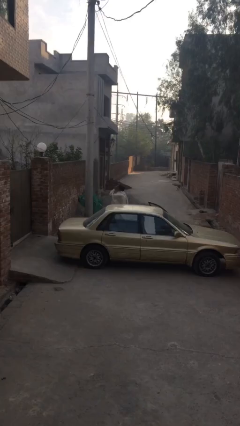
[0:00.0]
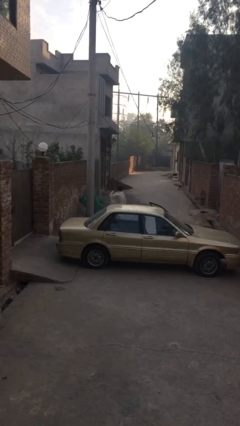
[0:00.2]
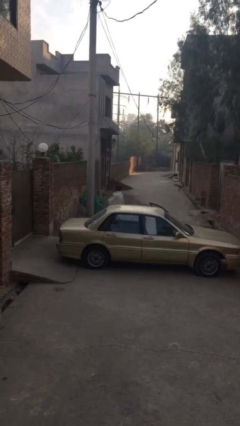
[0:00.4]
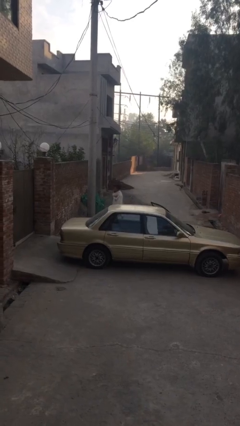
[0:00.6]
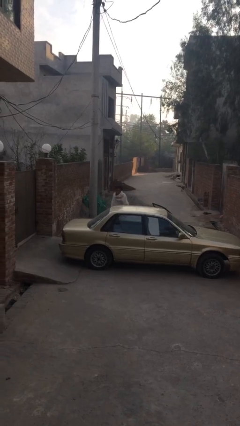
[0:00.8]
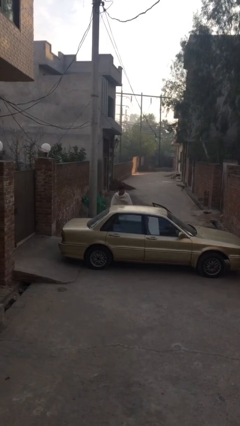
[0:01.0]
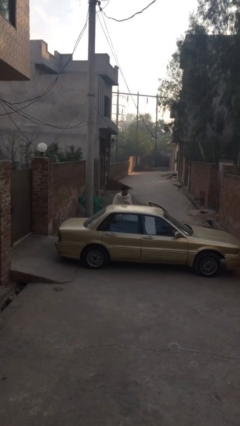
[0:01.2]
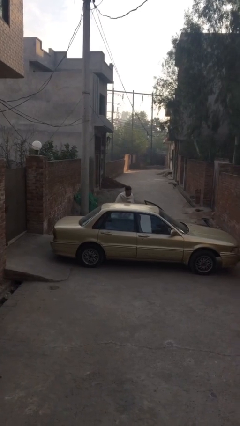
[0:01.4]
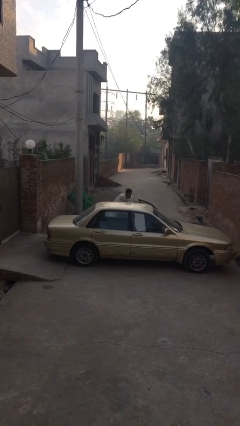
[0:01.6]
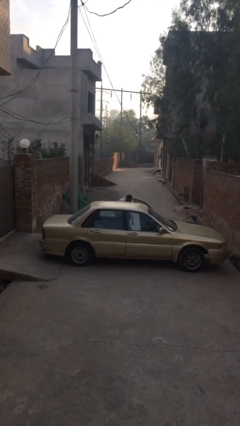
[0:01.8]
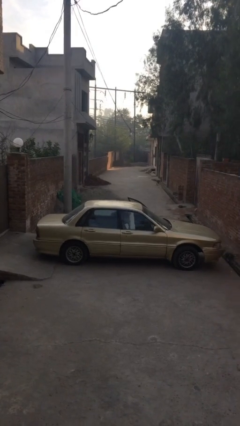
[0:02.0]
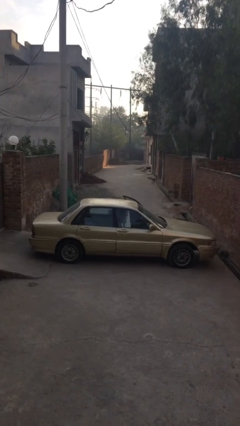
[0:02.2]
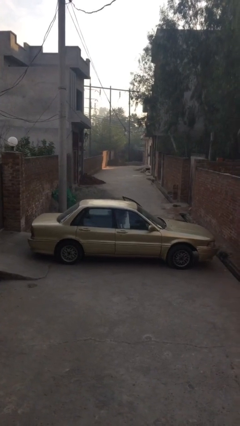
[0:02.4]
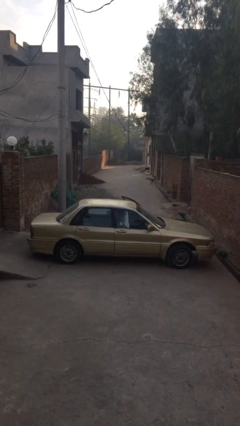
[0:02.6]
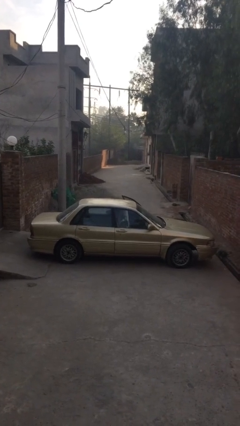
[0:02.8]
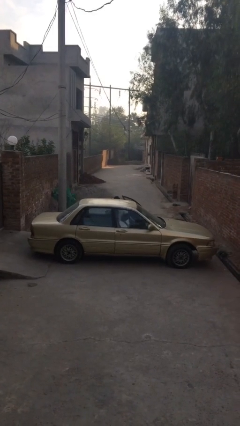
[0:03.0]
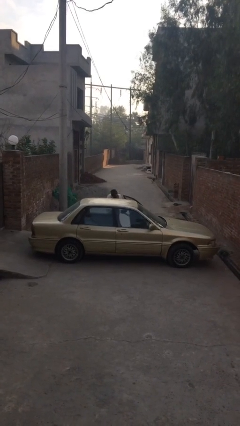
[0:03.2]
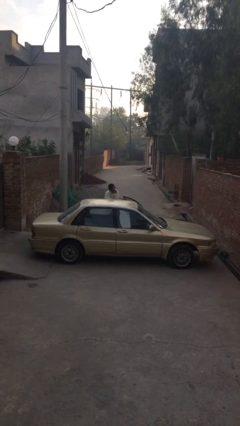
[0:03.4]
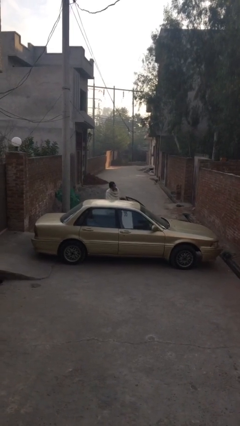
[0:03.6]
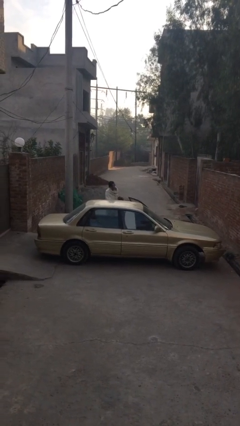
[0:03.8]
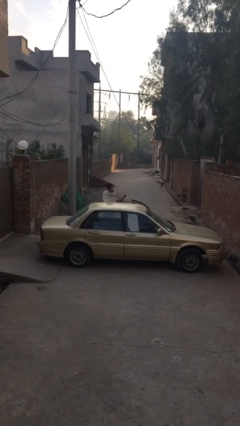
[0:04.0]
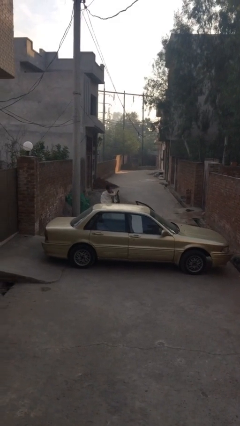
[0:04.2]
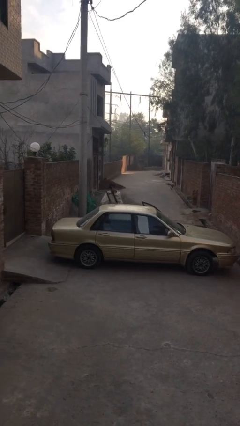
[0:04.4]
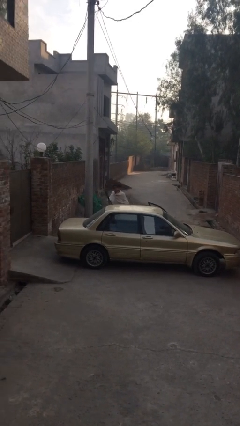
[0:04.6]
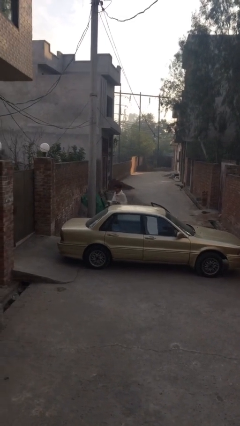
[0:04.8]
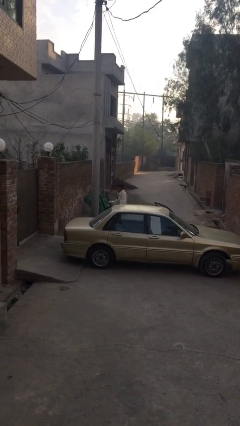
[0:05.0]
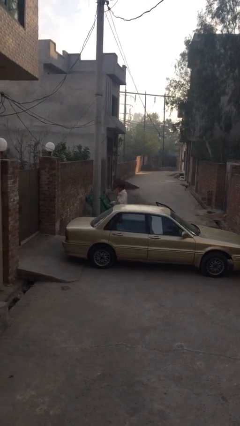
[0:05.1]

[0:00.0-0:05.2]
person unloads car

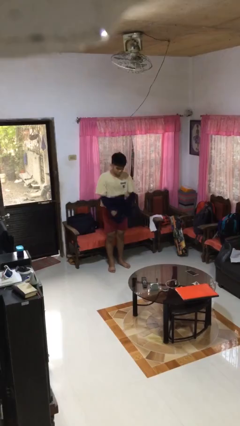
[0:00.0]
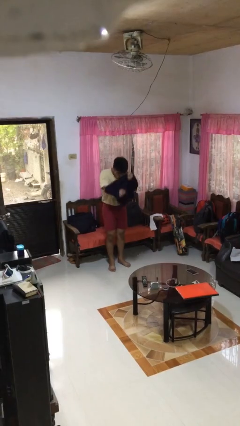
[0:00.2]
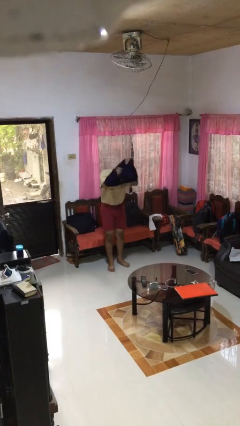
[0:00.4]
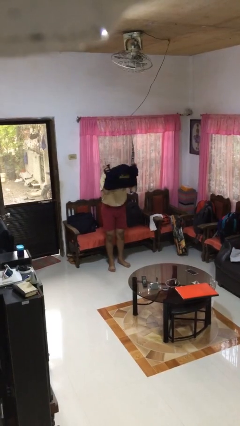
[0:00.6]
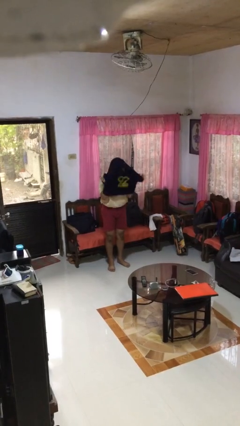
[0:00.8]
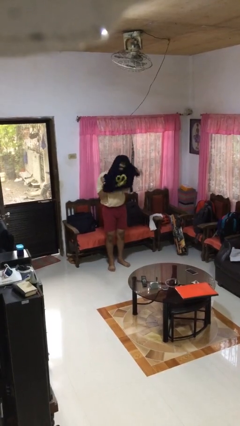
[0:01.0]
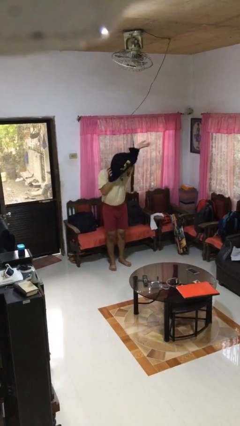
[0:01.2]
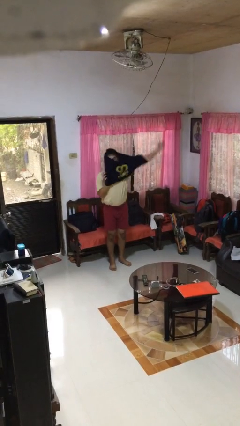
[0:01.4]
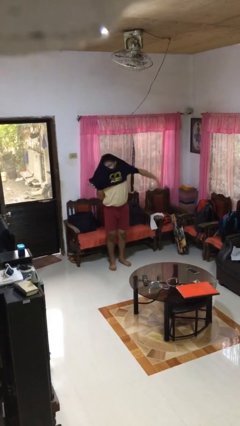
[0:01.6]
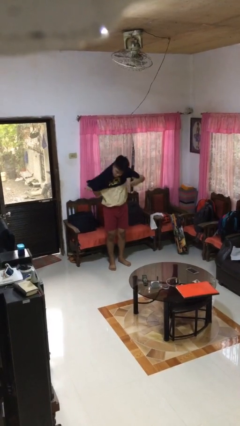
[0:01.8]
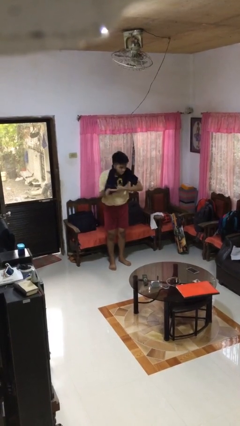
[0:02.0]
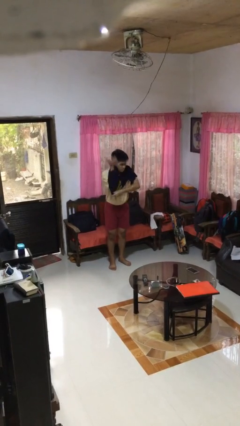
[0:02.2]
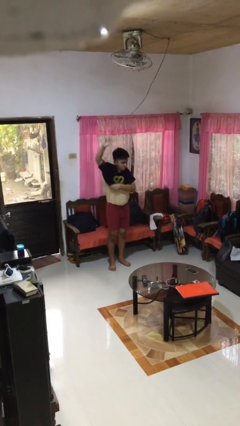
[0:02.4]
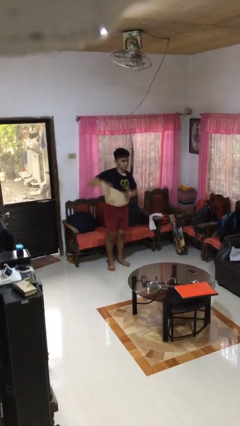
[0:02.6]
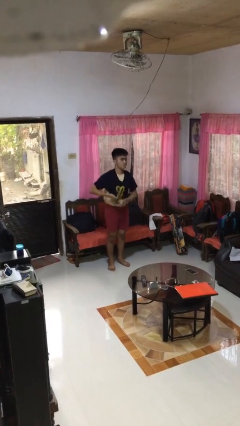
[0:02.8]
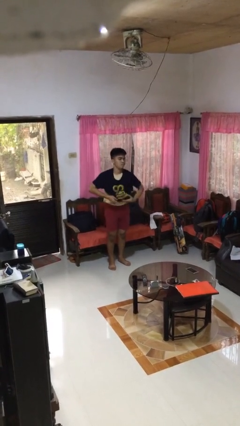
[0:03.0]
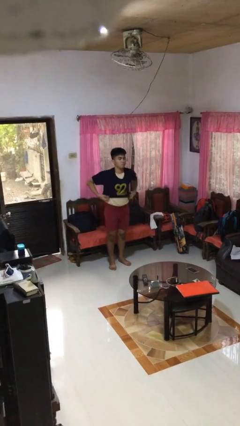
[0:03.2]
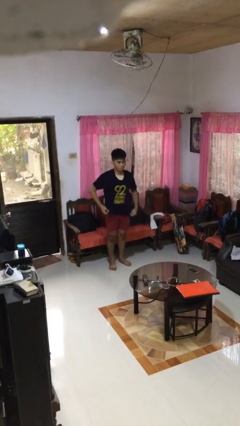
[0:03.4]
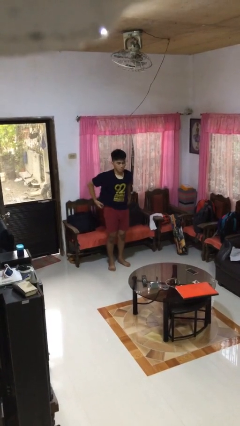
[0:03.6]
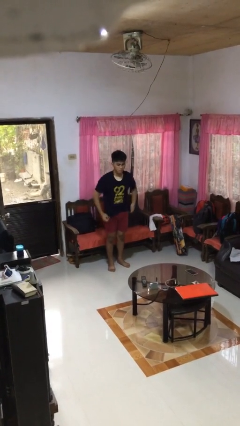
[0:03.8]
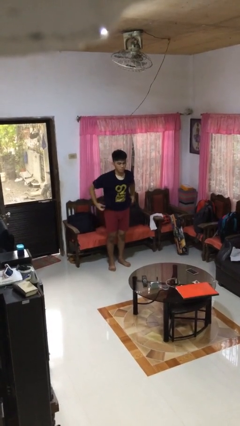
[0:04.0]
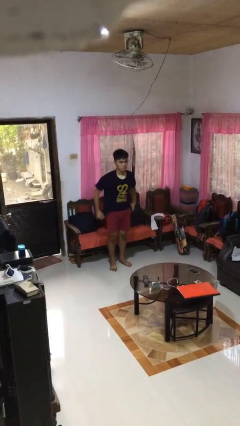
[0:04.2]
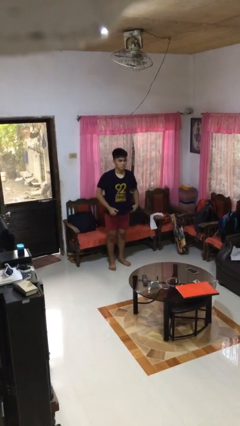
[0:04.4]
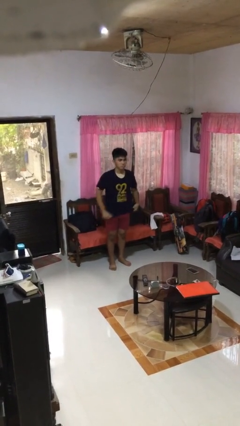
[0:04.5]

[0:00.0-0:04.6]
person puts on shirt

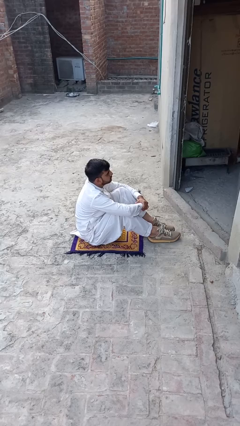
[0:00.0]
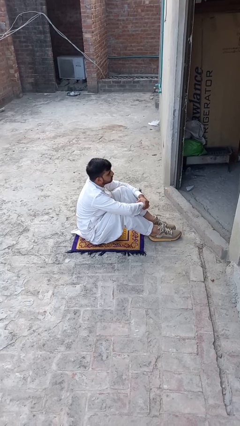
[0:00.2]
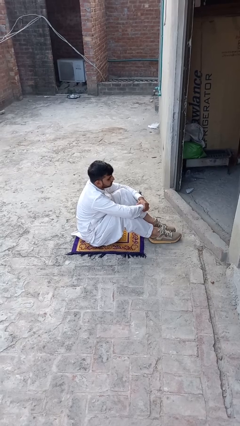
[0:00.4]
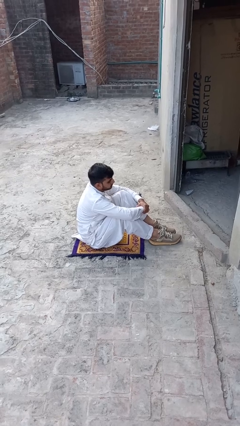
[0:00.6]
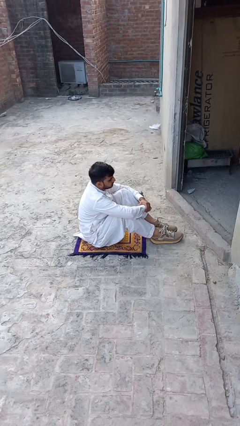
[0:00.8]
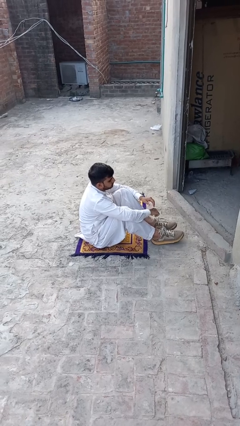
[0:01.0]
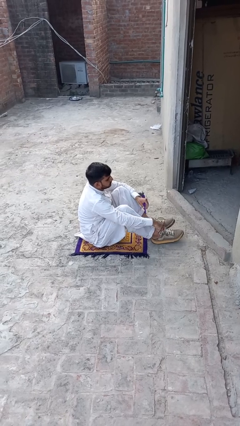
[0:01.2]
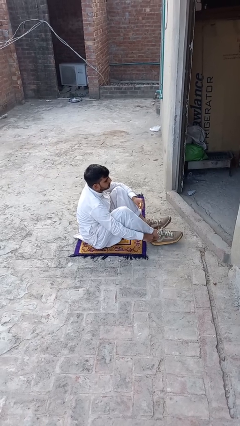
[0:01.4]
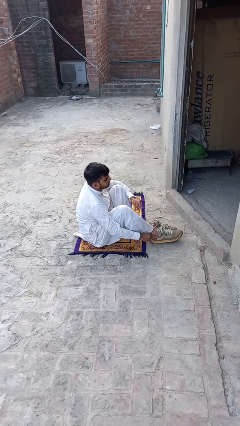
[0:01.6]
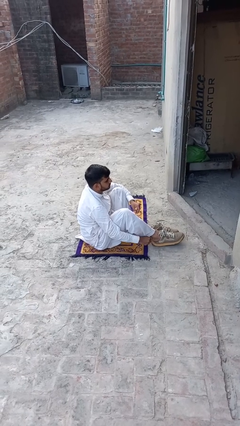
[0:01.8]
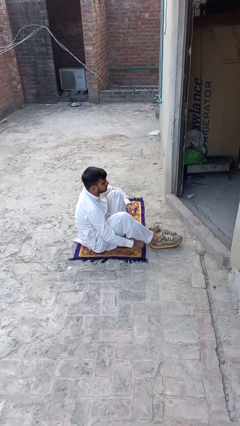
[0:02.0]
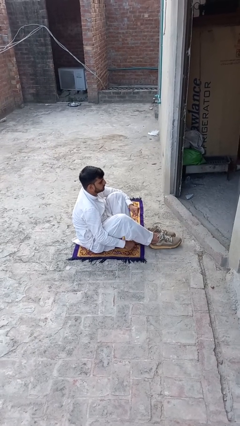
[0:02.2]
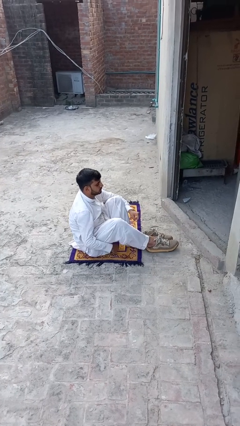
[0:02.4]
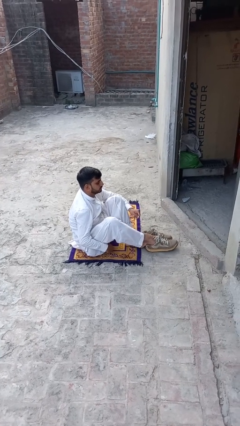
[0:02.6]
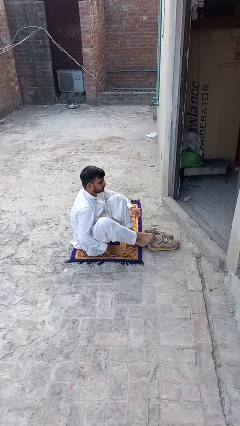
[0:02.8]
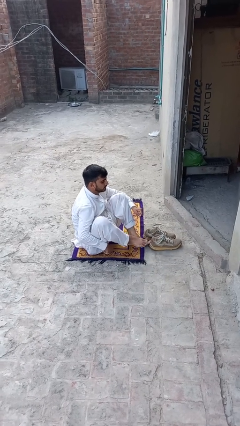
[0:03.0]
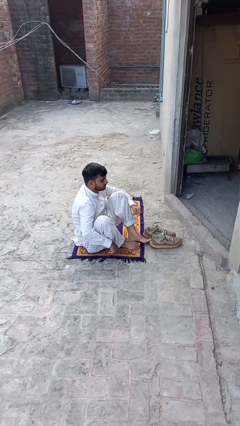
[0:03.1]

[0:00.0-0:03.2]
person takes off shoes

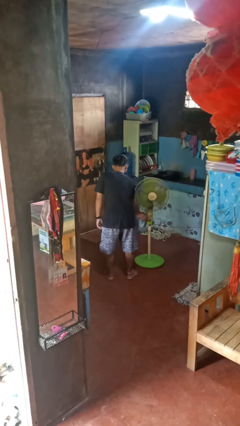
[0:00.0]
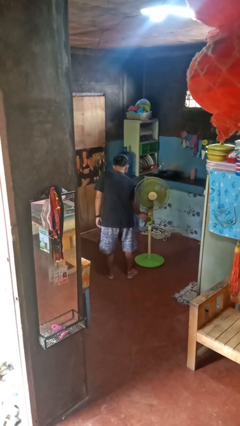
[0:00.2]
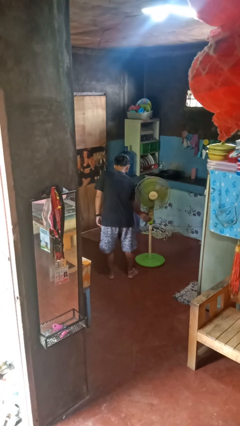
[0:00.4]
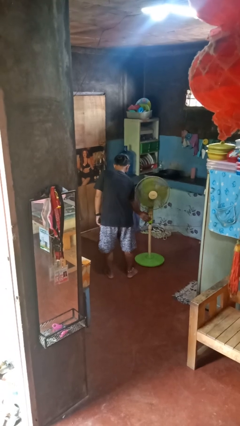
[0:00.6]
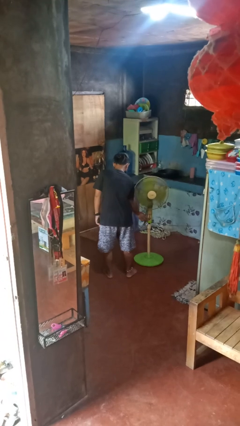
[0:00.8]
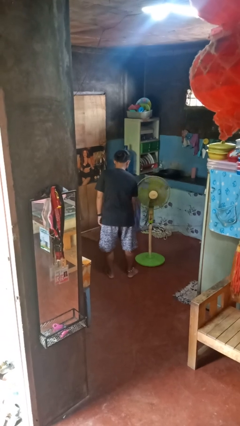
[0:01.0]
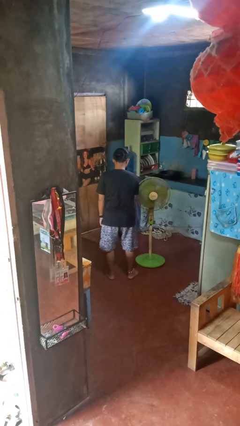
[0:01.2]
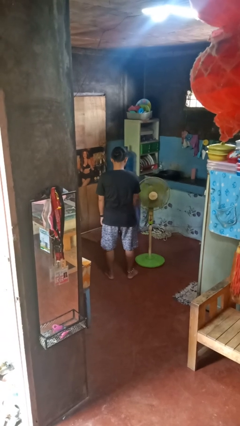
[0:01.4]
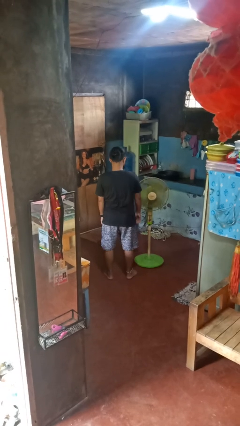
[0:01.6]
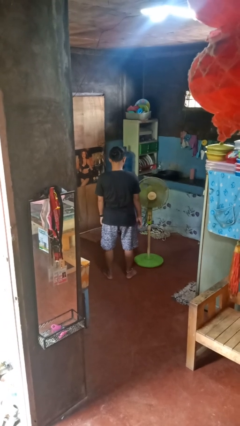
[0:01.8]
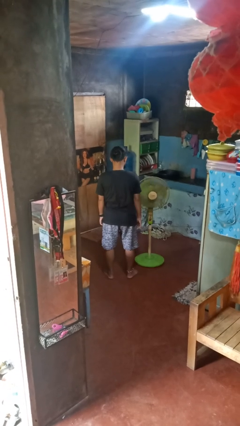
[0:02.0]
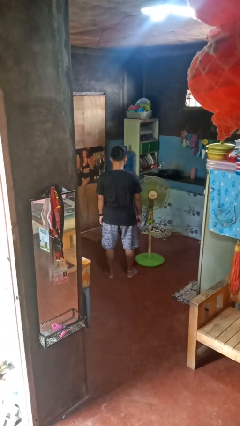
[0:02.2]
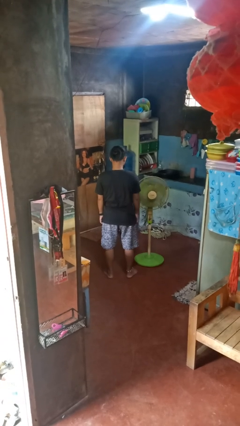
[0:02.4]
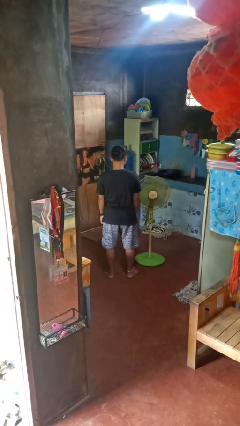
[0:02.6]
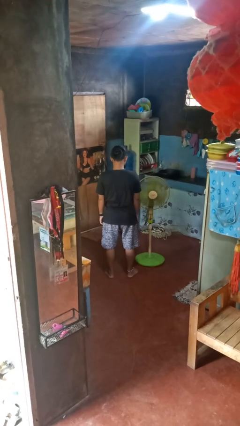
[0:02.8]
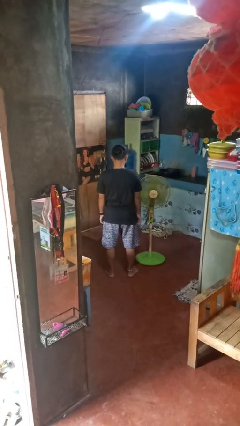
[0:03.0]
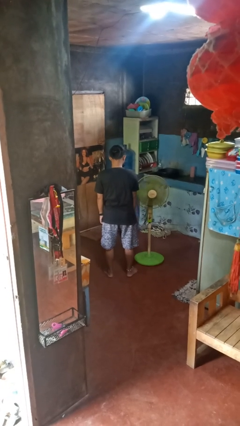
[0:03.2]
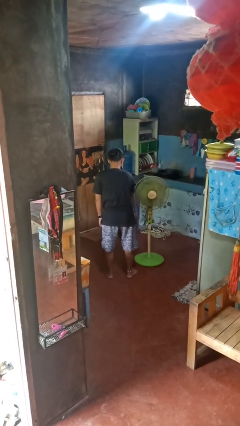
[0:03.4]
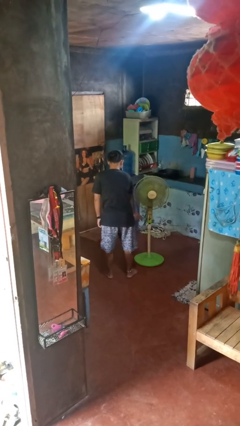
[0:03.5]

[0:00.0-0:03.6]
person turns on fan

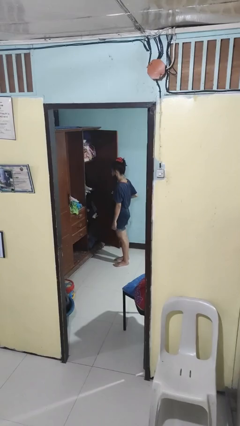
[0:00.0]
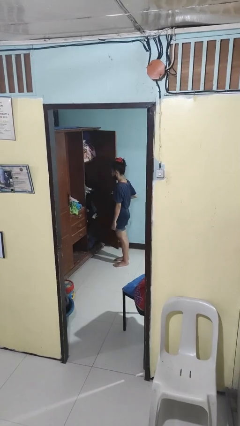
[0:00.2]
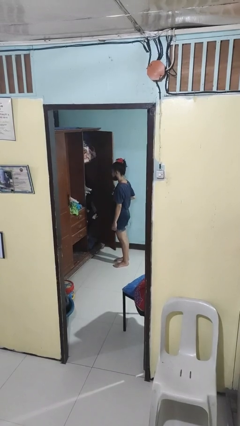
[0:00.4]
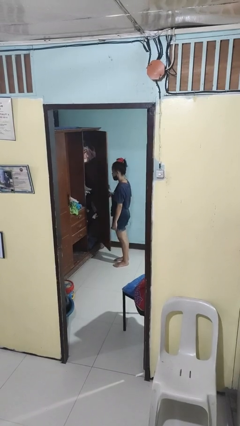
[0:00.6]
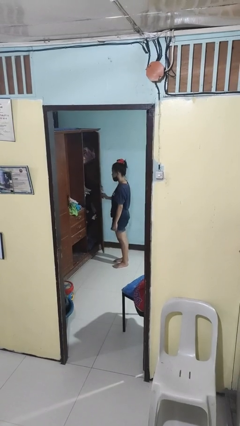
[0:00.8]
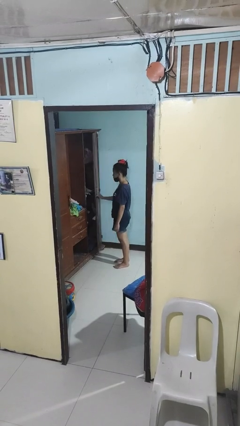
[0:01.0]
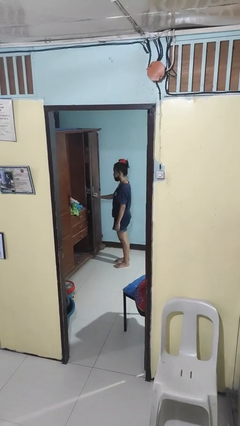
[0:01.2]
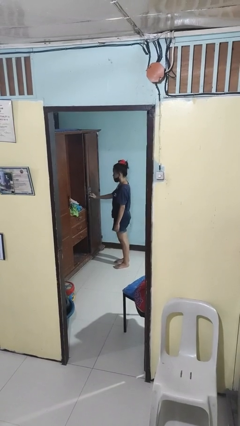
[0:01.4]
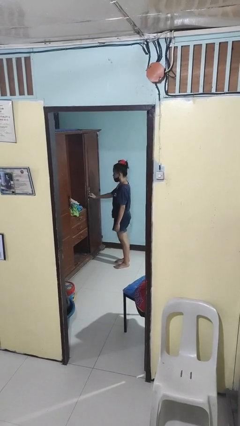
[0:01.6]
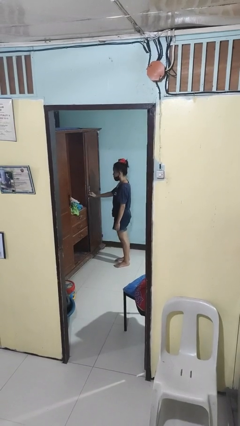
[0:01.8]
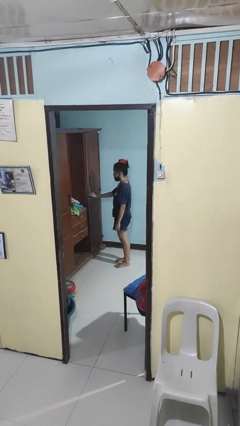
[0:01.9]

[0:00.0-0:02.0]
person closes closet door
